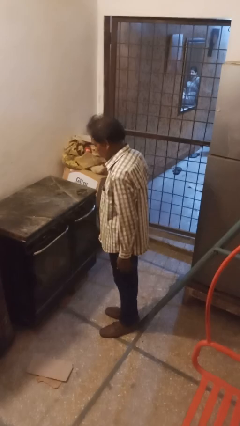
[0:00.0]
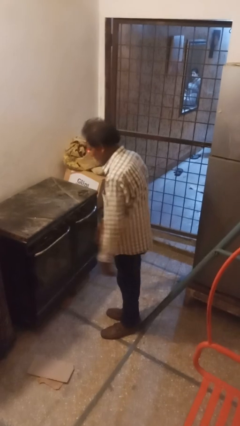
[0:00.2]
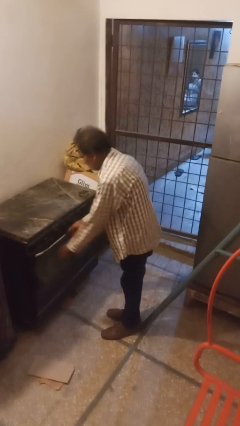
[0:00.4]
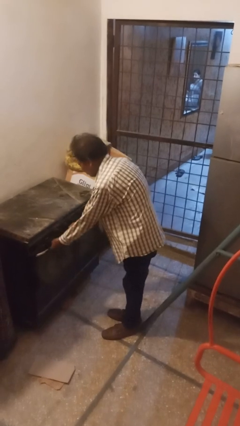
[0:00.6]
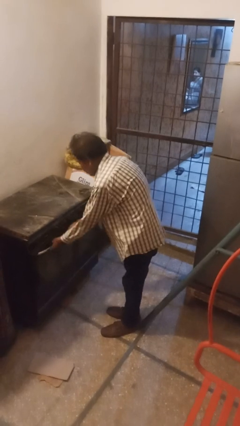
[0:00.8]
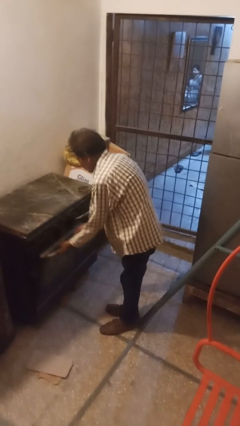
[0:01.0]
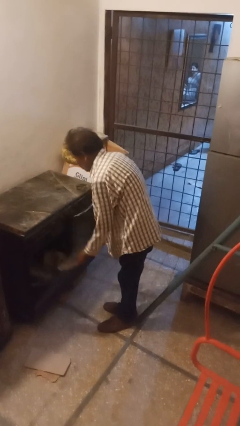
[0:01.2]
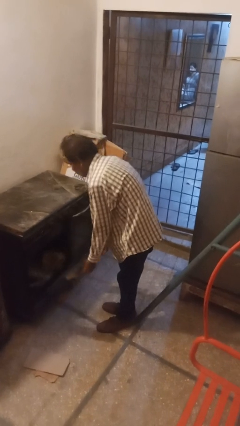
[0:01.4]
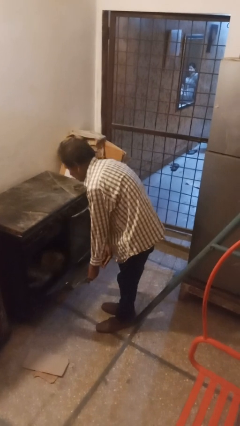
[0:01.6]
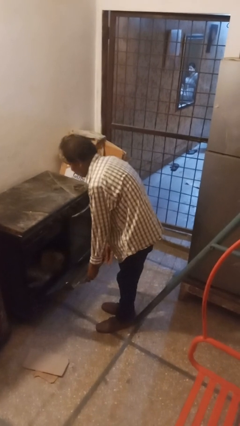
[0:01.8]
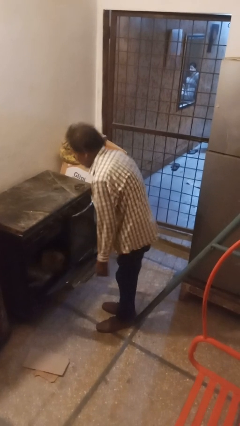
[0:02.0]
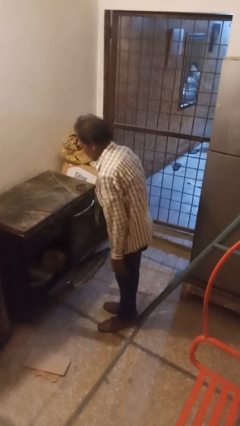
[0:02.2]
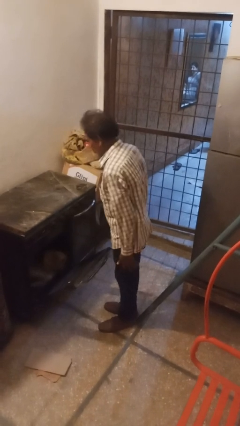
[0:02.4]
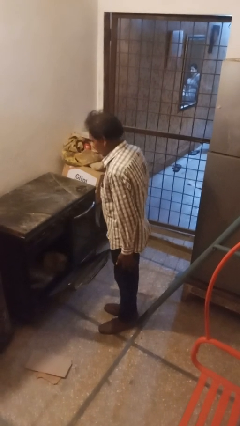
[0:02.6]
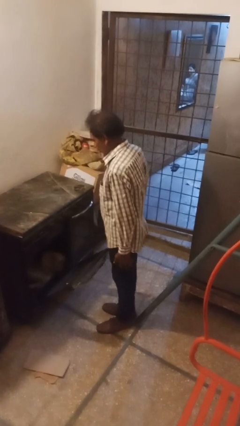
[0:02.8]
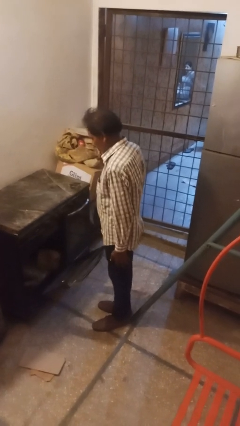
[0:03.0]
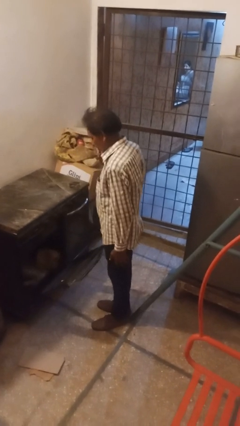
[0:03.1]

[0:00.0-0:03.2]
person opens oven door

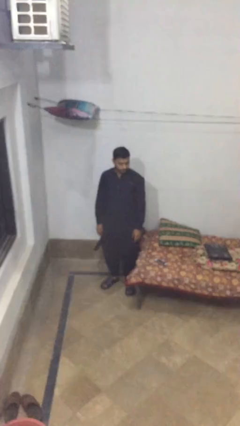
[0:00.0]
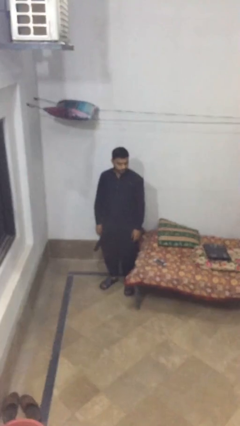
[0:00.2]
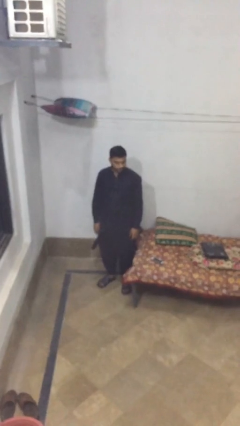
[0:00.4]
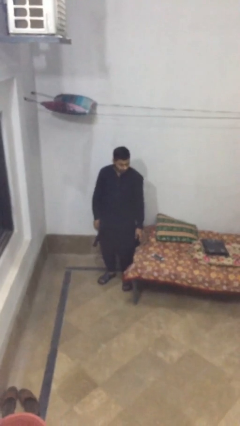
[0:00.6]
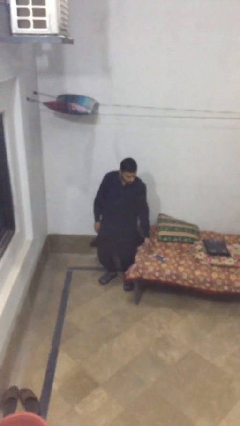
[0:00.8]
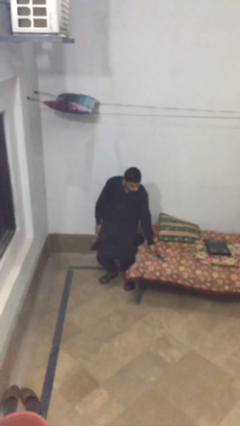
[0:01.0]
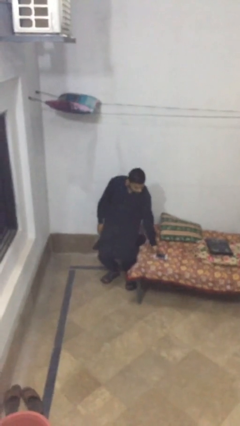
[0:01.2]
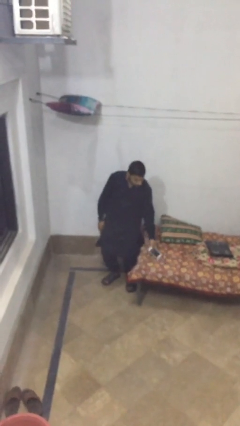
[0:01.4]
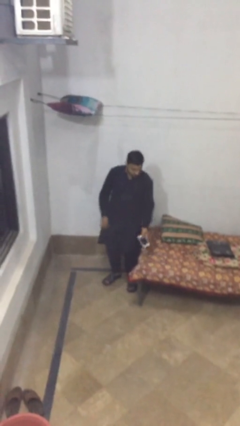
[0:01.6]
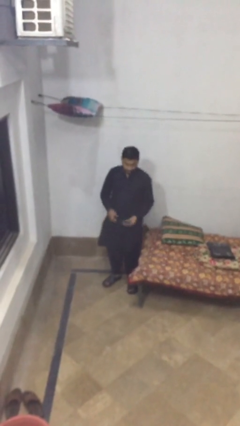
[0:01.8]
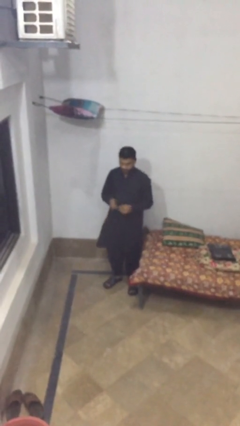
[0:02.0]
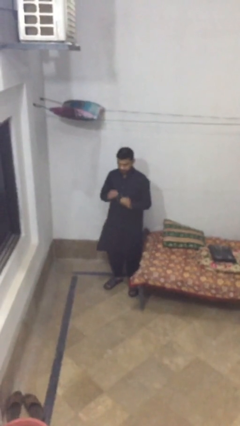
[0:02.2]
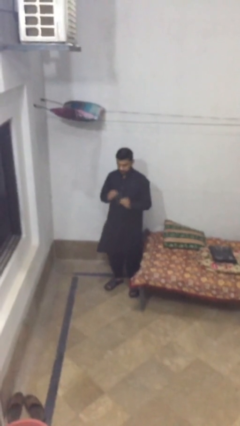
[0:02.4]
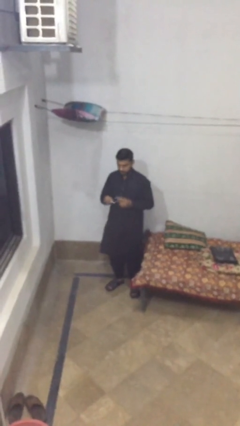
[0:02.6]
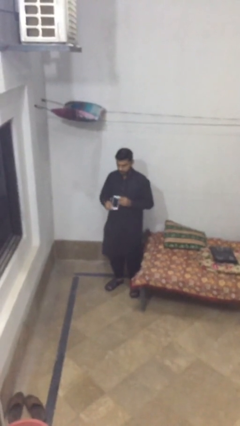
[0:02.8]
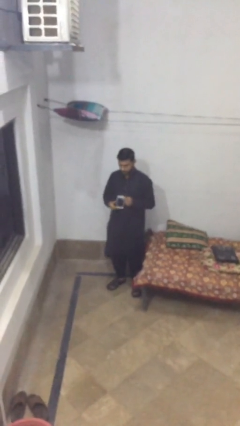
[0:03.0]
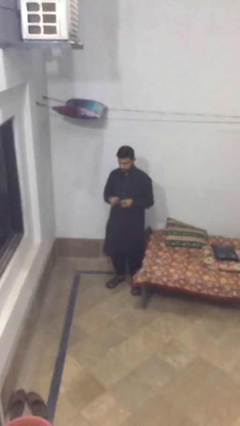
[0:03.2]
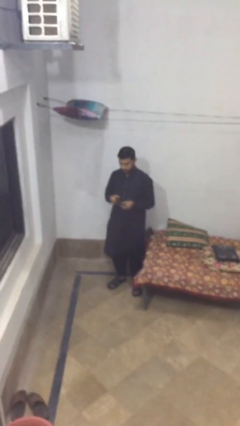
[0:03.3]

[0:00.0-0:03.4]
person picks up object from table

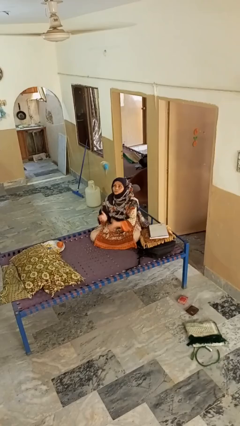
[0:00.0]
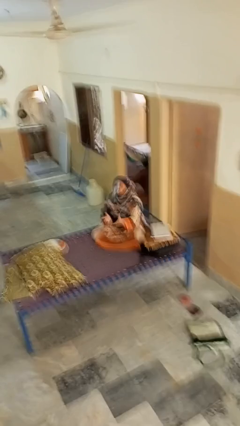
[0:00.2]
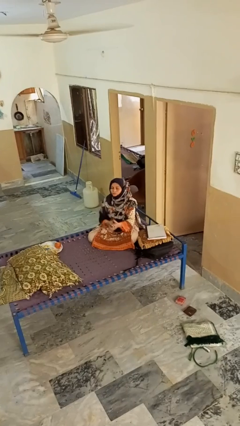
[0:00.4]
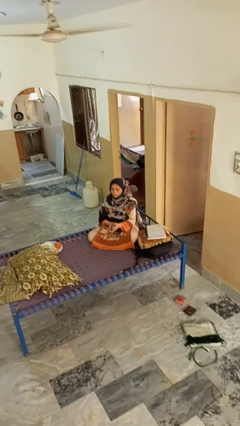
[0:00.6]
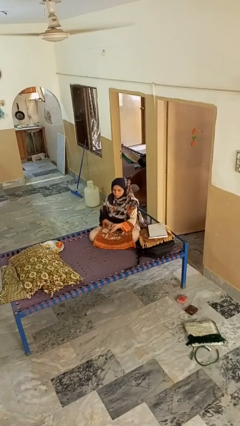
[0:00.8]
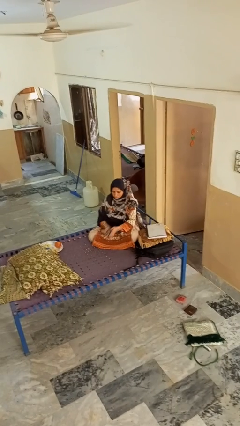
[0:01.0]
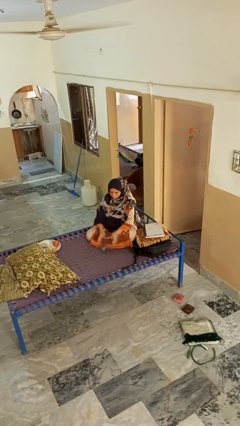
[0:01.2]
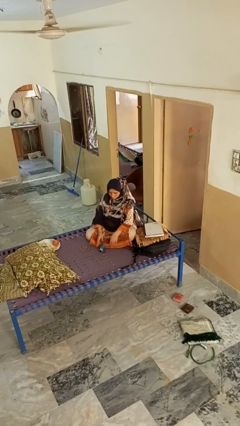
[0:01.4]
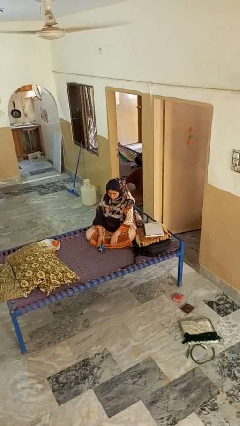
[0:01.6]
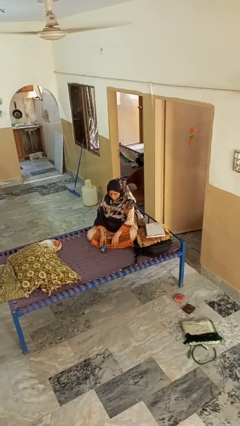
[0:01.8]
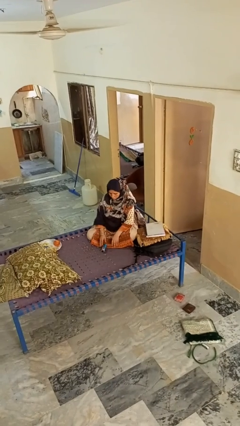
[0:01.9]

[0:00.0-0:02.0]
person catches dropped object

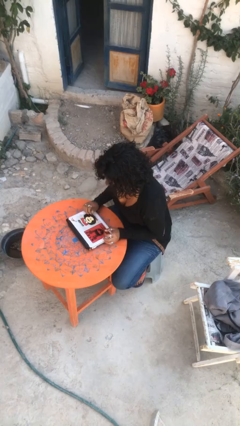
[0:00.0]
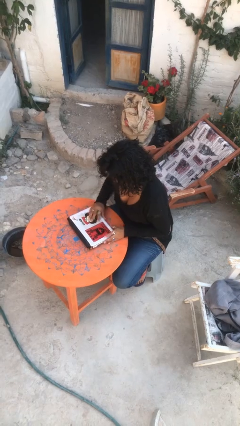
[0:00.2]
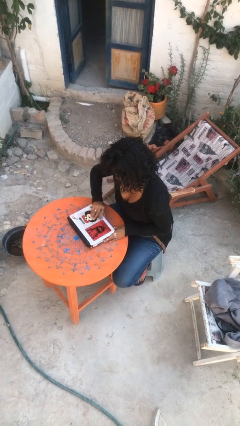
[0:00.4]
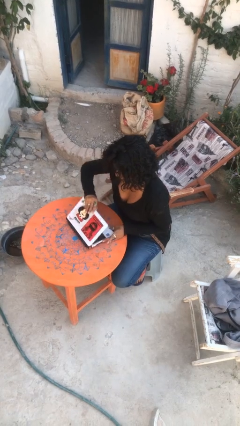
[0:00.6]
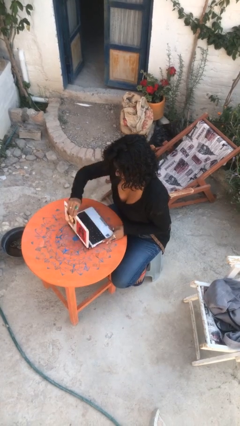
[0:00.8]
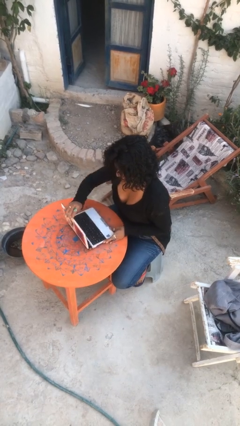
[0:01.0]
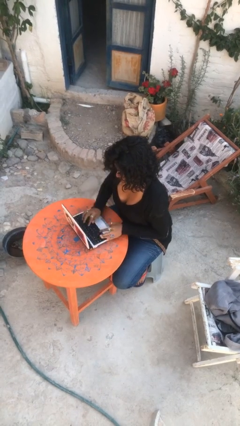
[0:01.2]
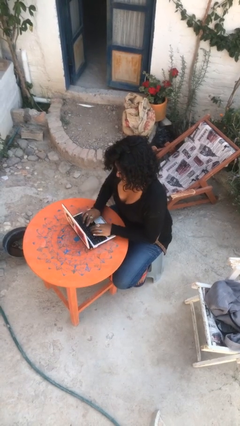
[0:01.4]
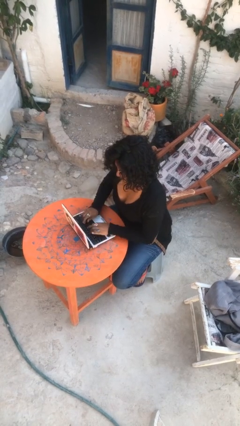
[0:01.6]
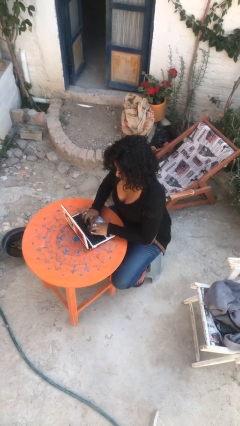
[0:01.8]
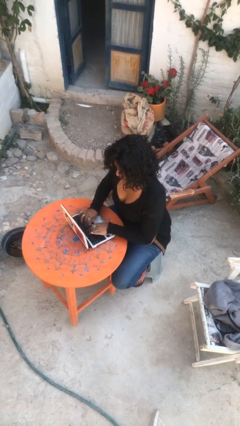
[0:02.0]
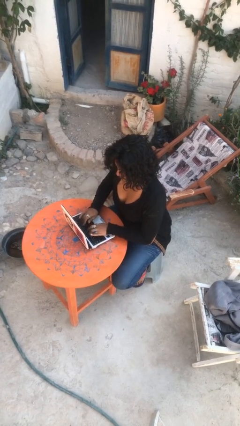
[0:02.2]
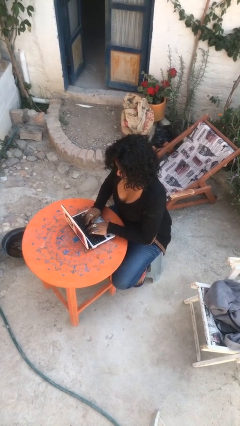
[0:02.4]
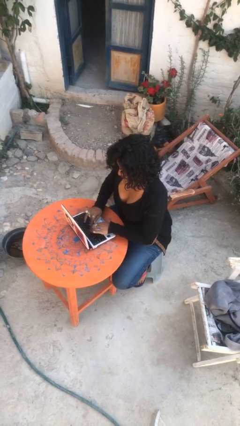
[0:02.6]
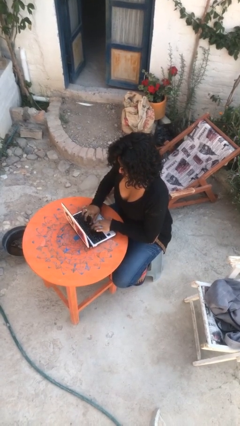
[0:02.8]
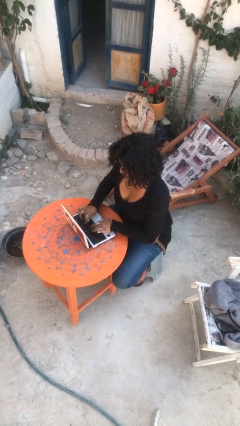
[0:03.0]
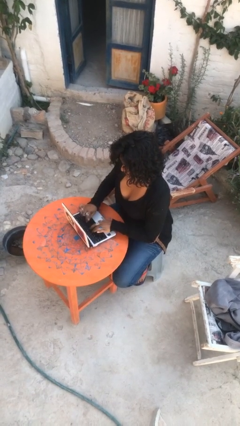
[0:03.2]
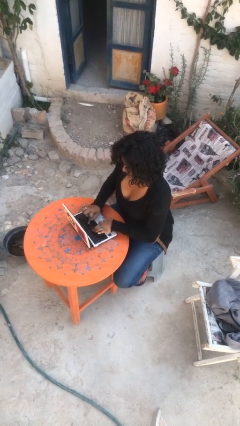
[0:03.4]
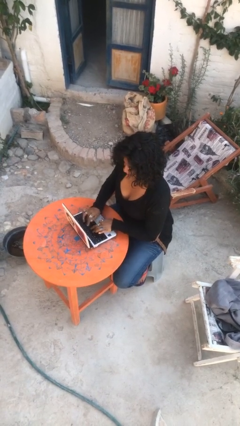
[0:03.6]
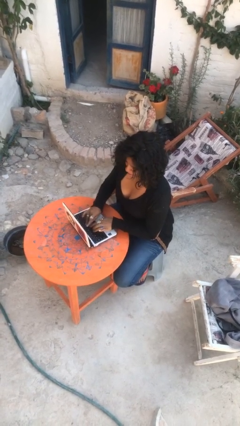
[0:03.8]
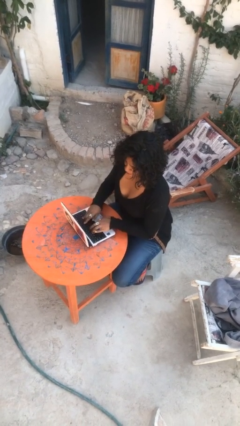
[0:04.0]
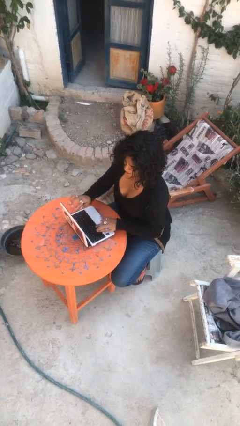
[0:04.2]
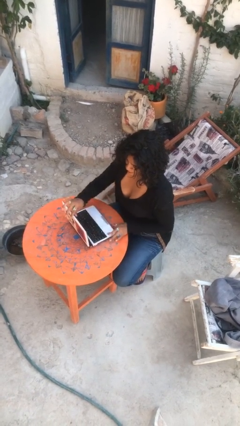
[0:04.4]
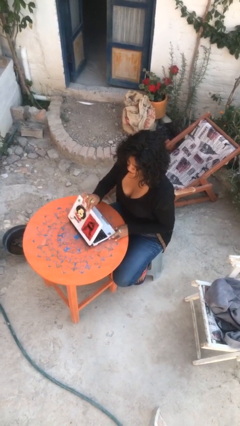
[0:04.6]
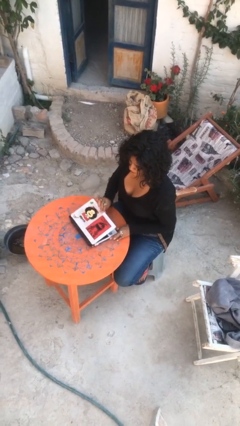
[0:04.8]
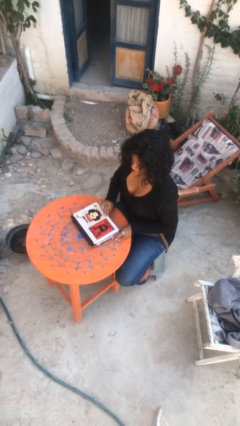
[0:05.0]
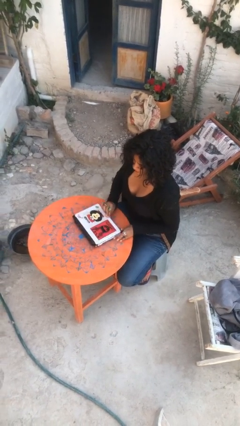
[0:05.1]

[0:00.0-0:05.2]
person interacts with laptop

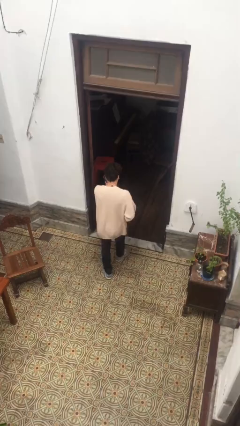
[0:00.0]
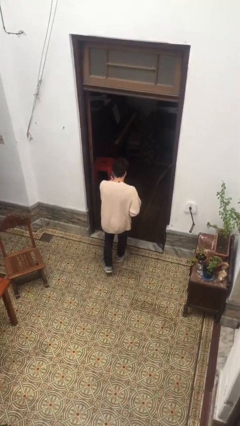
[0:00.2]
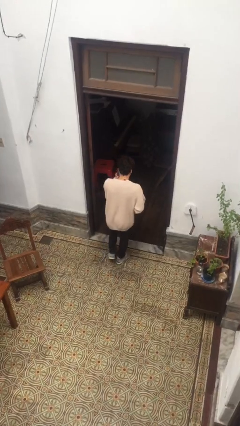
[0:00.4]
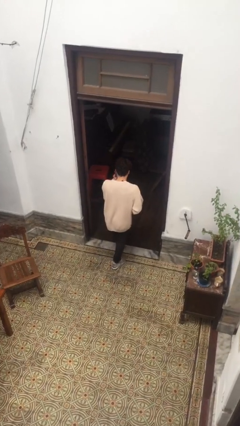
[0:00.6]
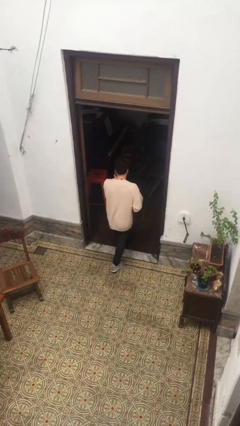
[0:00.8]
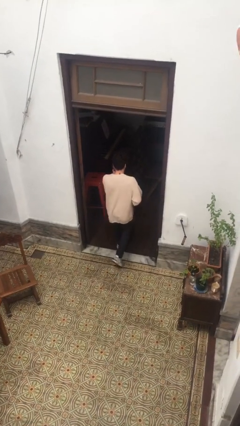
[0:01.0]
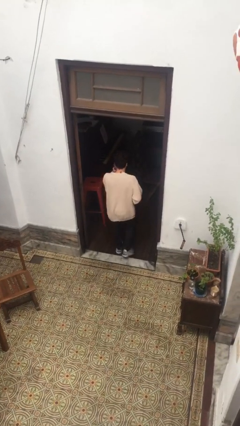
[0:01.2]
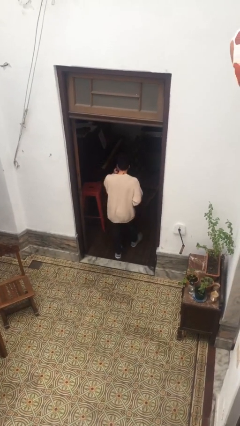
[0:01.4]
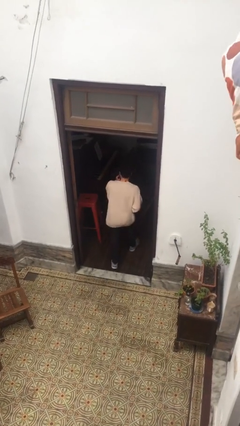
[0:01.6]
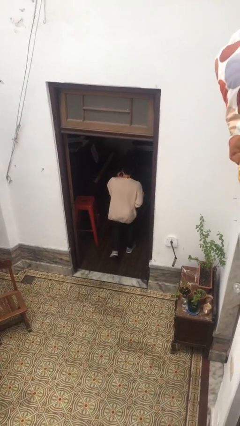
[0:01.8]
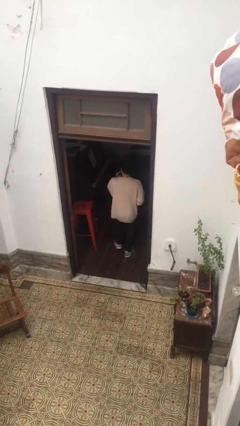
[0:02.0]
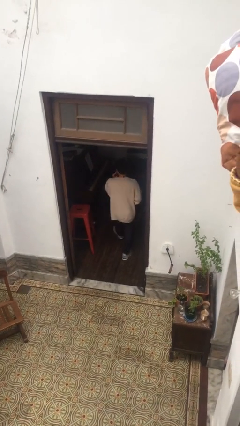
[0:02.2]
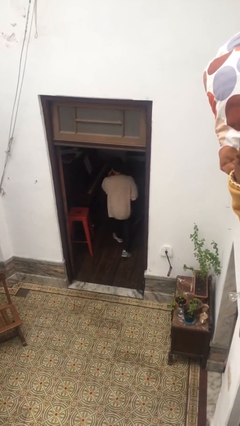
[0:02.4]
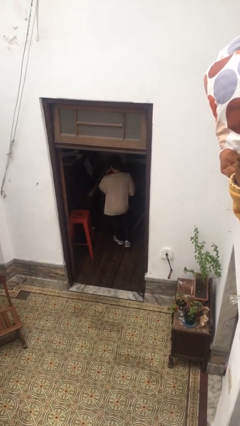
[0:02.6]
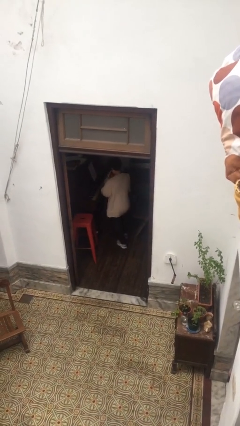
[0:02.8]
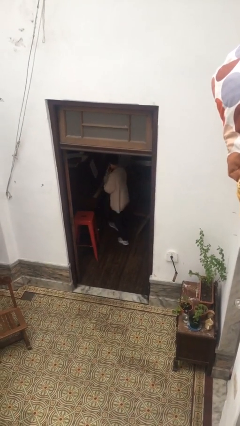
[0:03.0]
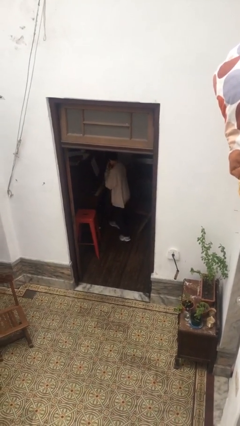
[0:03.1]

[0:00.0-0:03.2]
person exits scene through structure

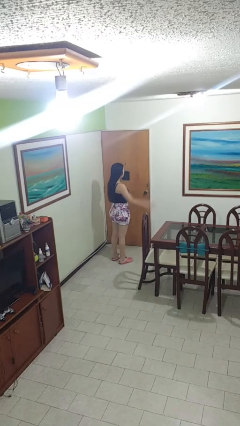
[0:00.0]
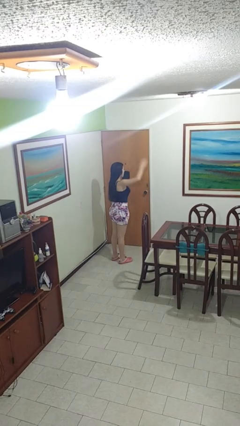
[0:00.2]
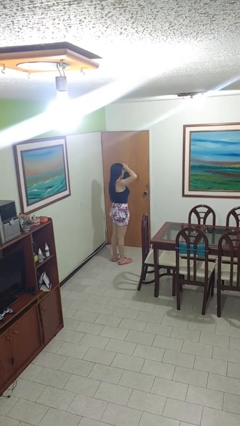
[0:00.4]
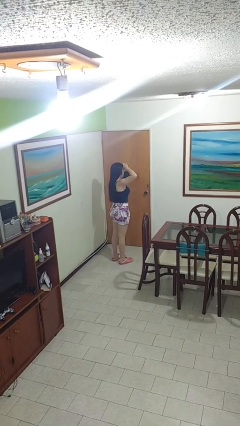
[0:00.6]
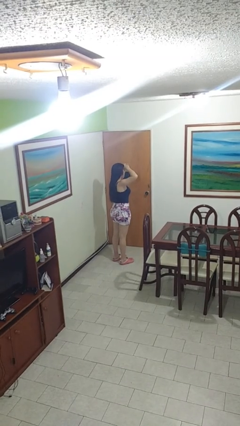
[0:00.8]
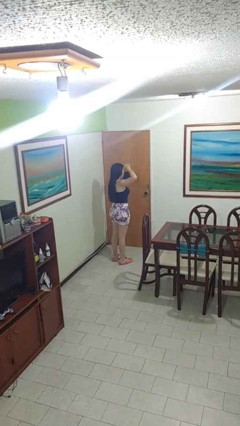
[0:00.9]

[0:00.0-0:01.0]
person salutes
